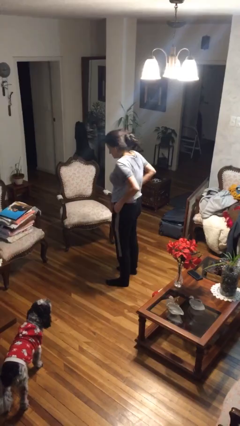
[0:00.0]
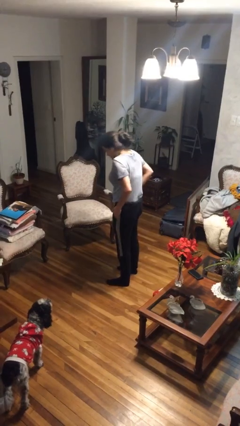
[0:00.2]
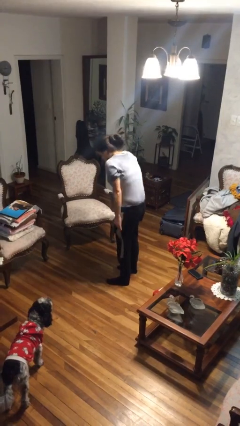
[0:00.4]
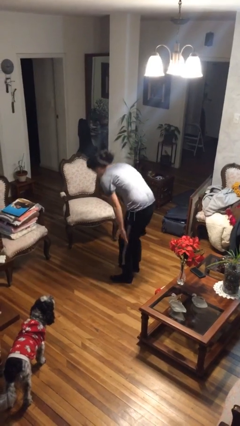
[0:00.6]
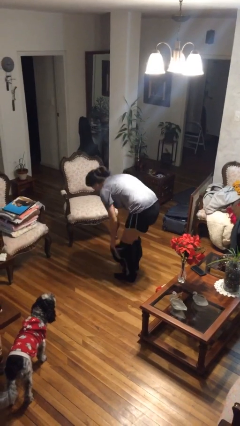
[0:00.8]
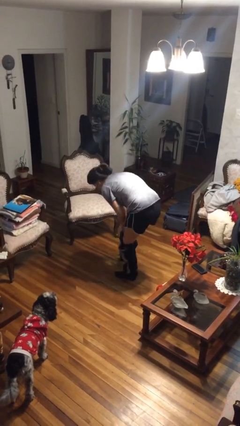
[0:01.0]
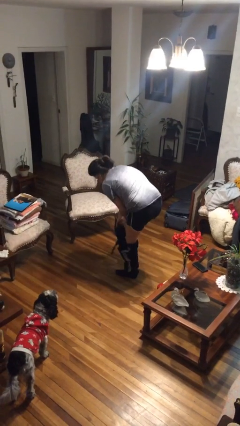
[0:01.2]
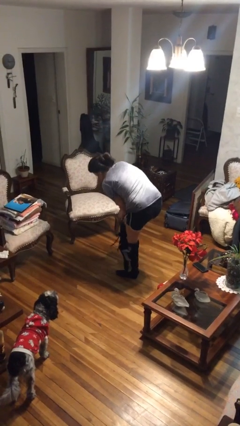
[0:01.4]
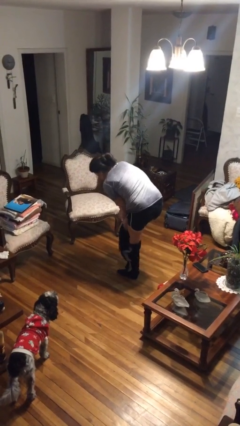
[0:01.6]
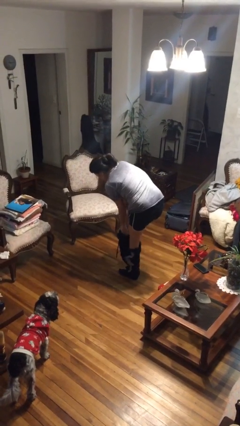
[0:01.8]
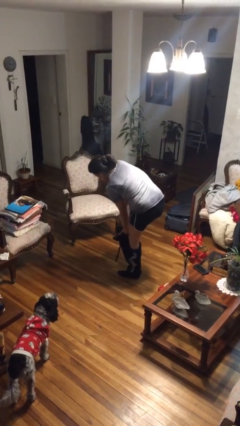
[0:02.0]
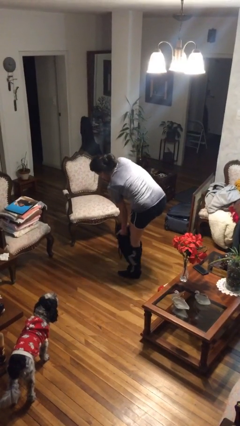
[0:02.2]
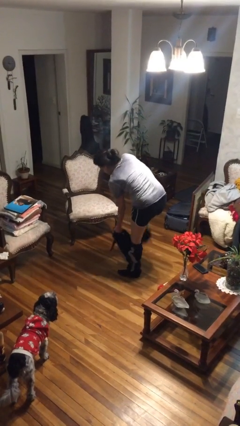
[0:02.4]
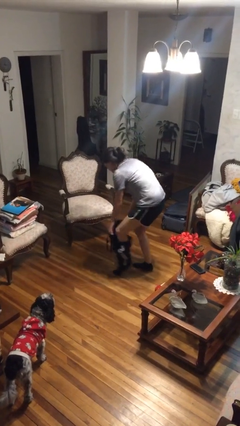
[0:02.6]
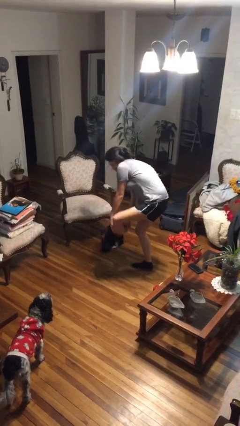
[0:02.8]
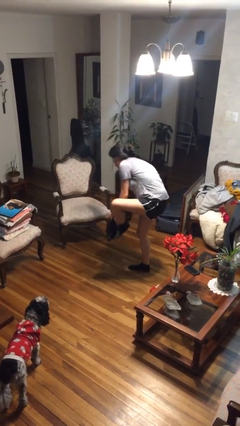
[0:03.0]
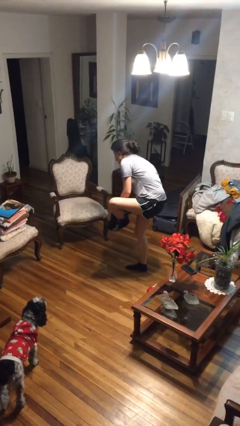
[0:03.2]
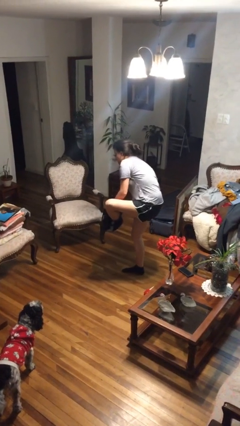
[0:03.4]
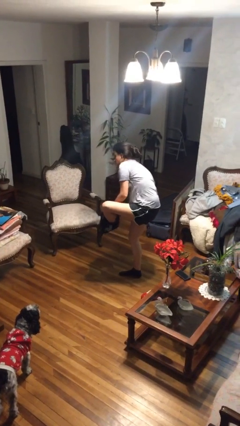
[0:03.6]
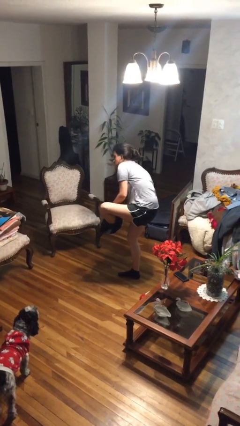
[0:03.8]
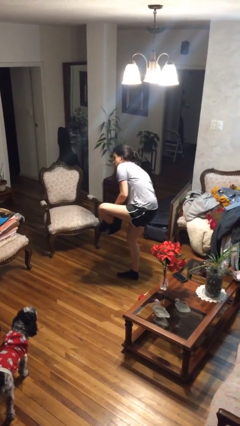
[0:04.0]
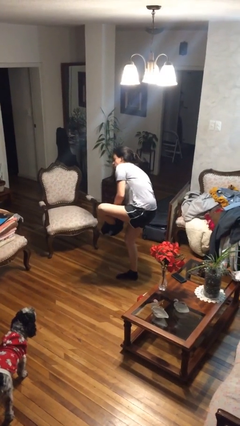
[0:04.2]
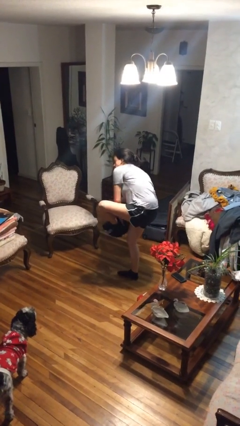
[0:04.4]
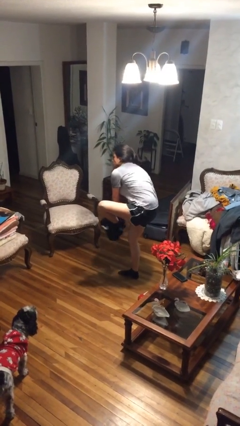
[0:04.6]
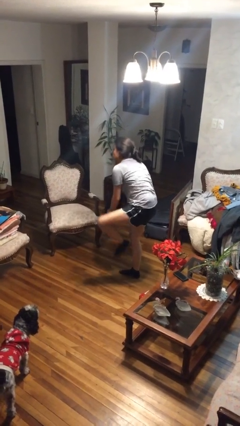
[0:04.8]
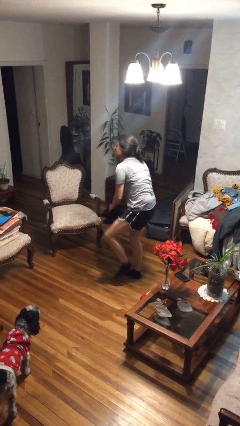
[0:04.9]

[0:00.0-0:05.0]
person takes off pants

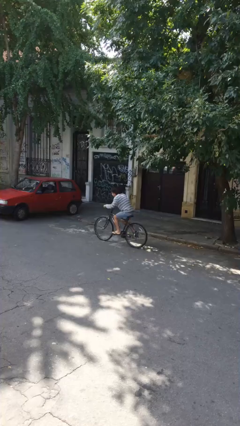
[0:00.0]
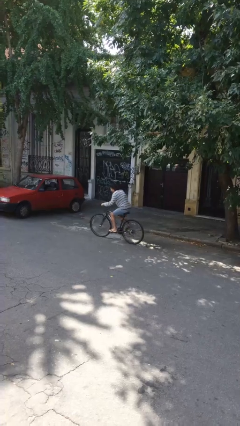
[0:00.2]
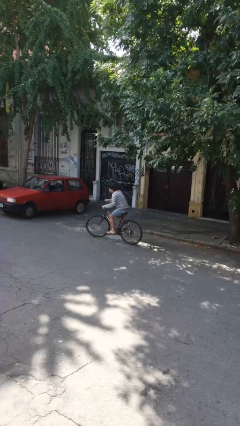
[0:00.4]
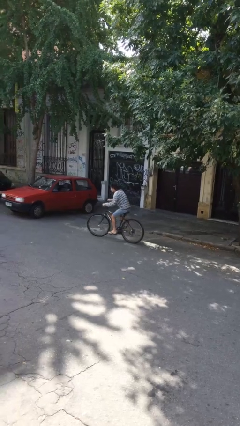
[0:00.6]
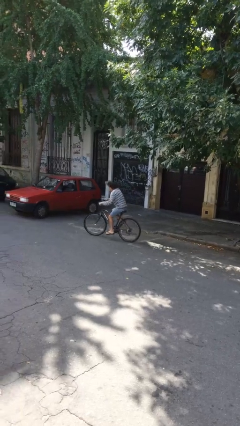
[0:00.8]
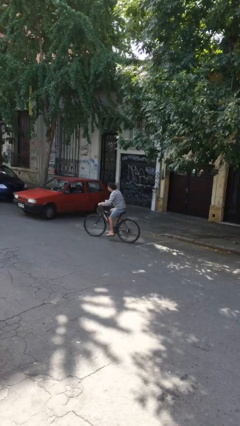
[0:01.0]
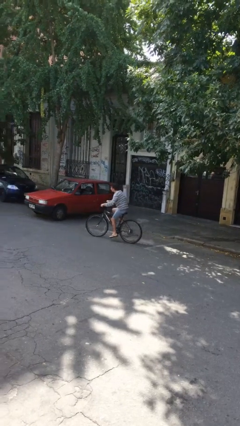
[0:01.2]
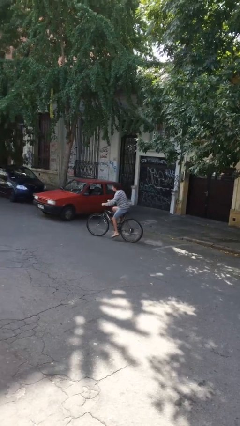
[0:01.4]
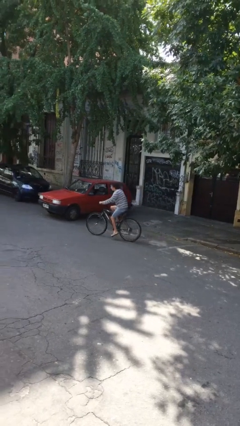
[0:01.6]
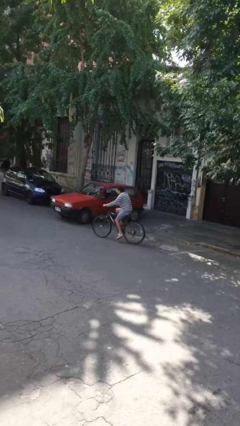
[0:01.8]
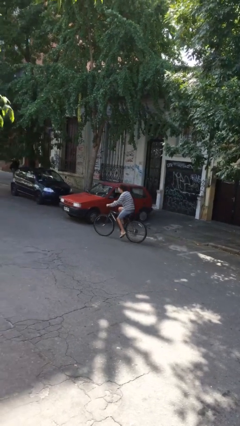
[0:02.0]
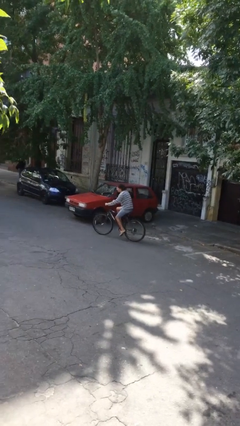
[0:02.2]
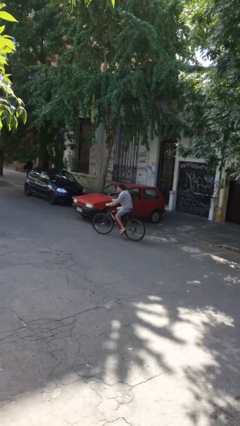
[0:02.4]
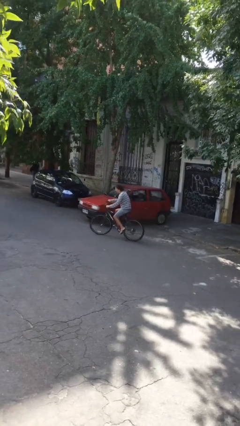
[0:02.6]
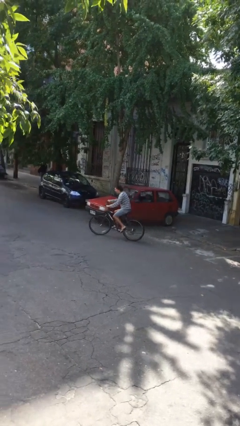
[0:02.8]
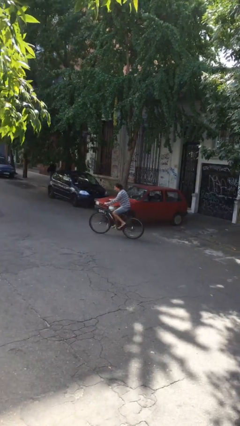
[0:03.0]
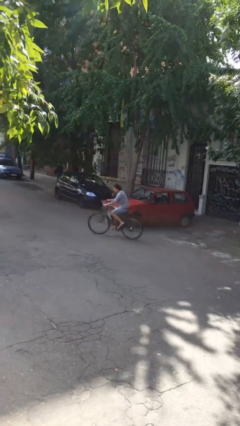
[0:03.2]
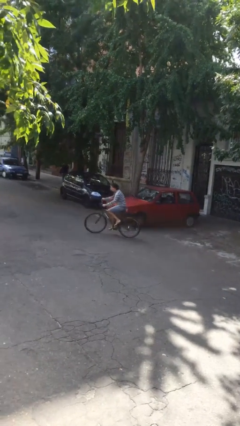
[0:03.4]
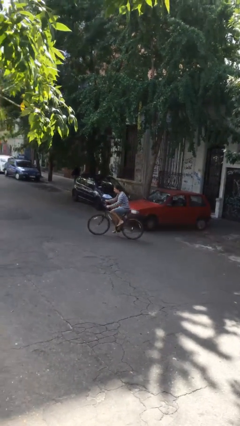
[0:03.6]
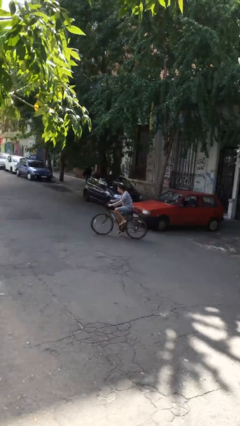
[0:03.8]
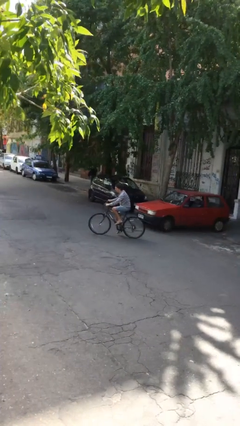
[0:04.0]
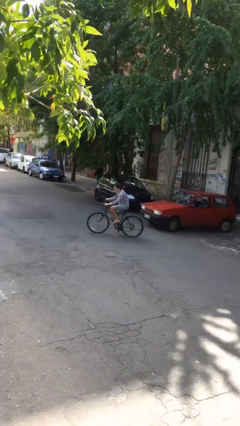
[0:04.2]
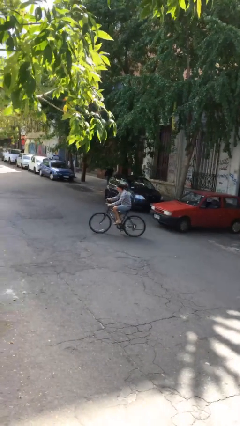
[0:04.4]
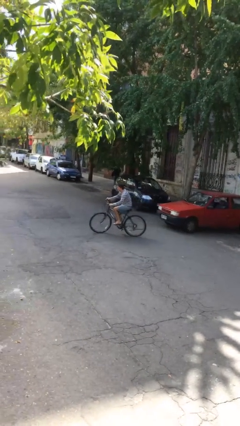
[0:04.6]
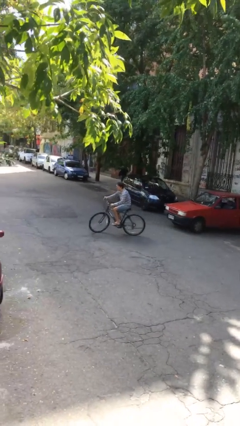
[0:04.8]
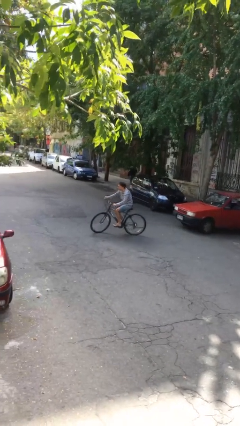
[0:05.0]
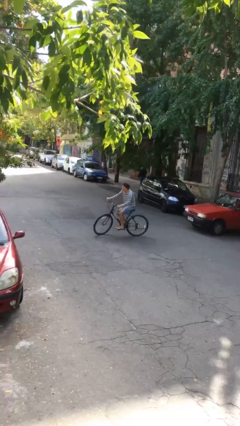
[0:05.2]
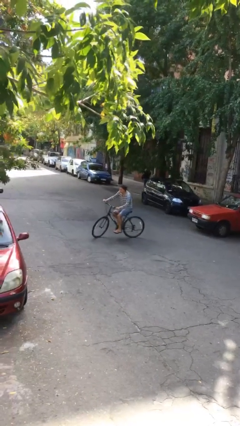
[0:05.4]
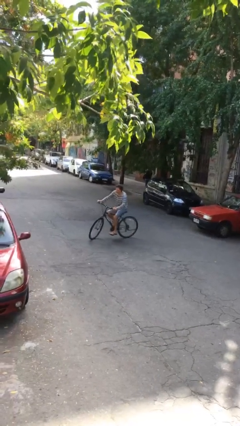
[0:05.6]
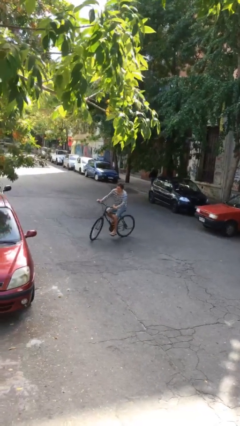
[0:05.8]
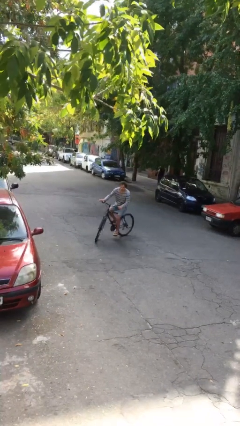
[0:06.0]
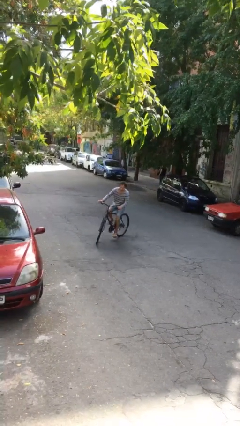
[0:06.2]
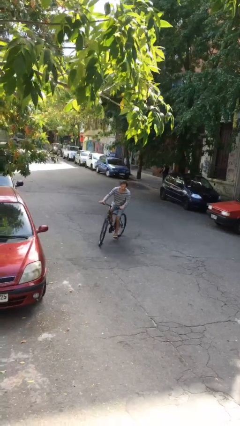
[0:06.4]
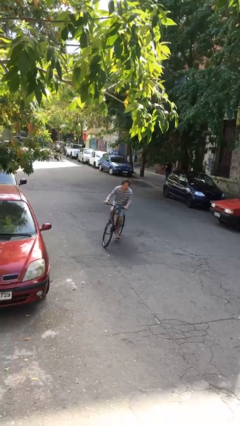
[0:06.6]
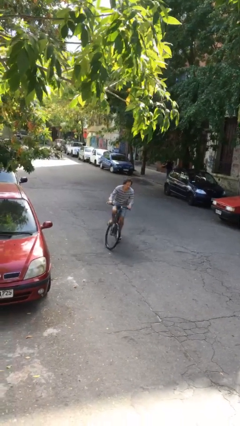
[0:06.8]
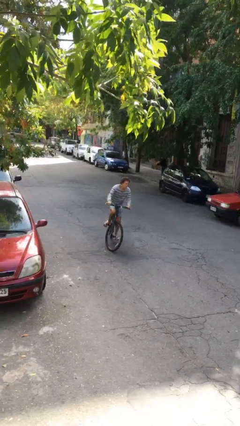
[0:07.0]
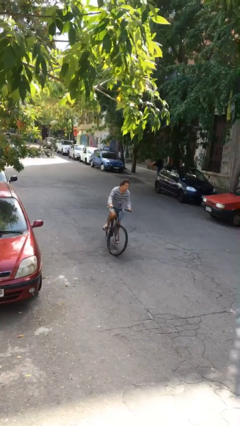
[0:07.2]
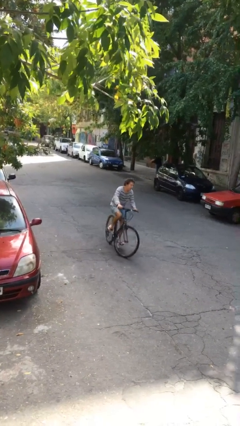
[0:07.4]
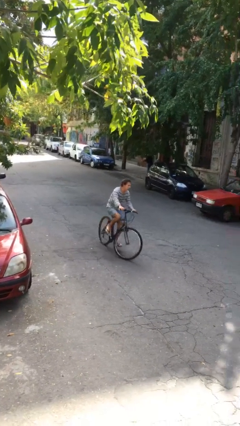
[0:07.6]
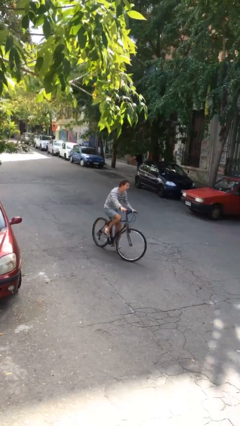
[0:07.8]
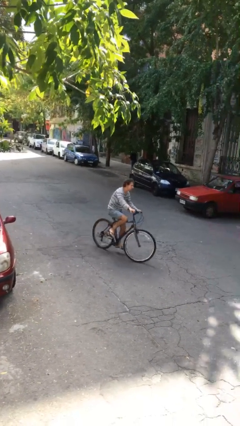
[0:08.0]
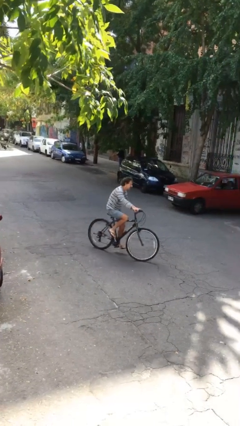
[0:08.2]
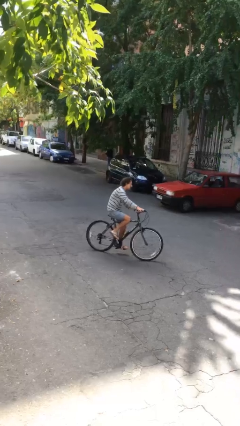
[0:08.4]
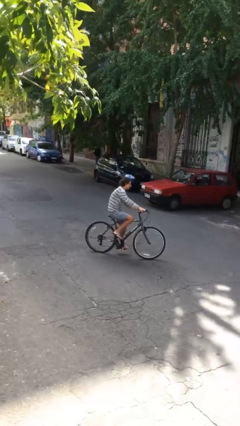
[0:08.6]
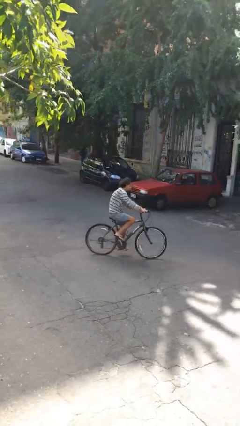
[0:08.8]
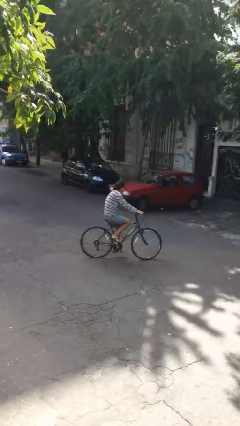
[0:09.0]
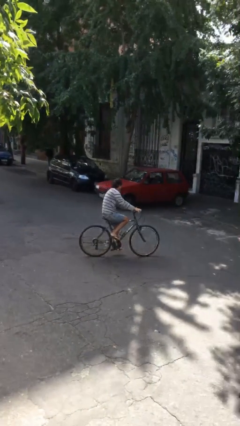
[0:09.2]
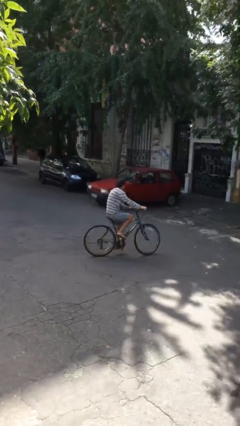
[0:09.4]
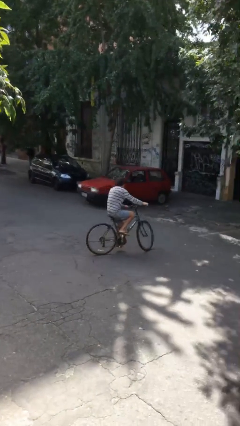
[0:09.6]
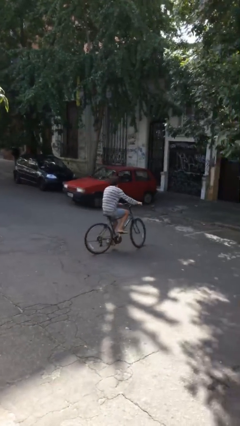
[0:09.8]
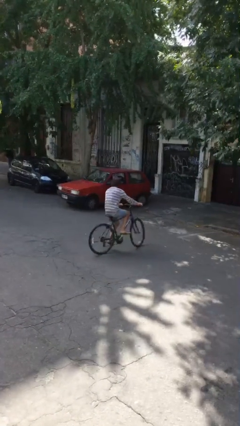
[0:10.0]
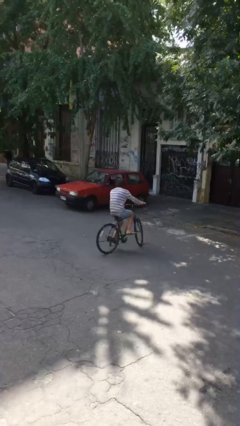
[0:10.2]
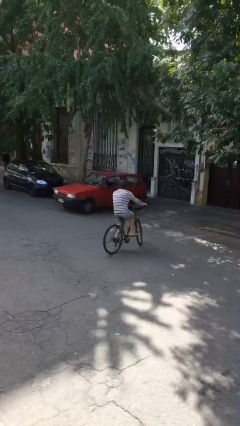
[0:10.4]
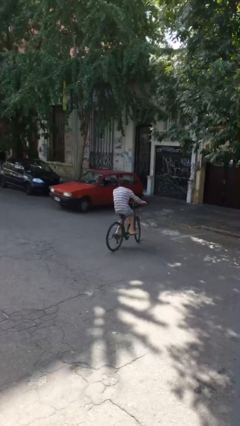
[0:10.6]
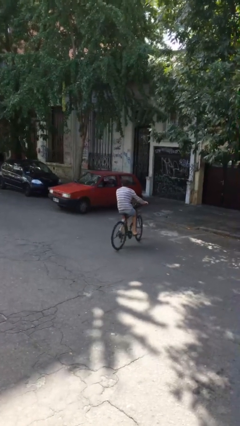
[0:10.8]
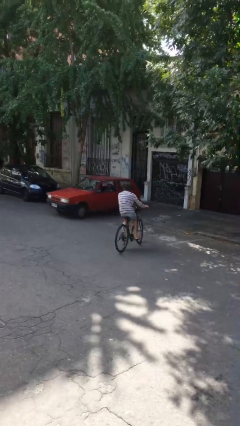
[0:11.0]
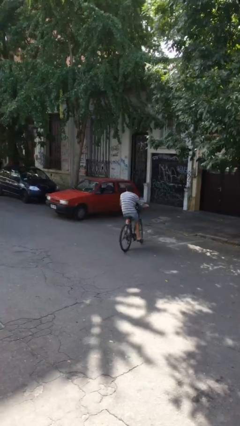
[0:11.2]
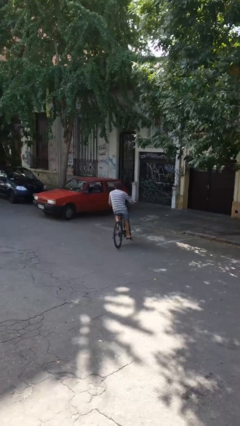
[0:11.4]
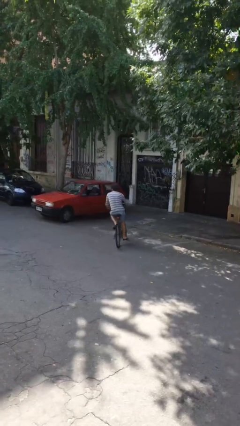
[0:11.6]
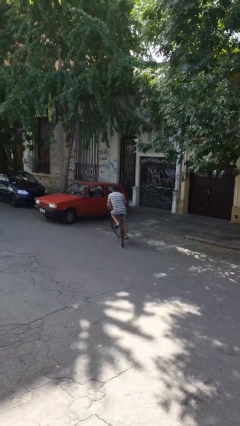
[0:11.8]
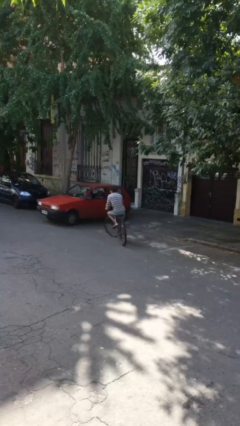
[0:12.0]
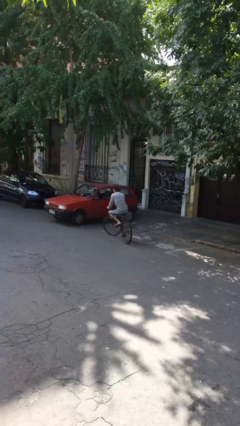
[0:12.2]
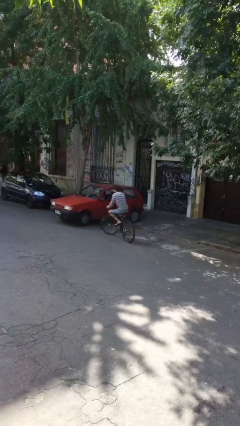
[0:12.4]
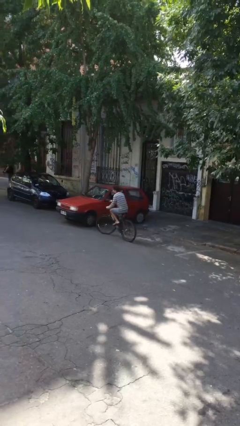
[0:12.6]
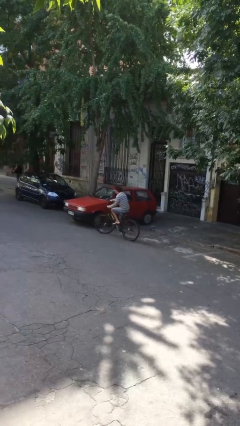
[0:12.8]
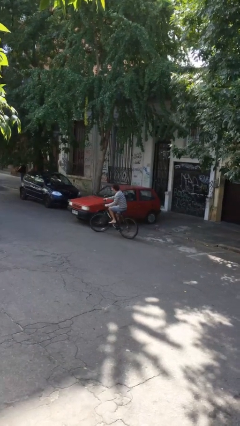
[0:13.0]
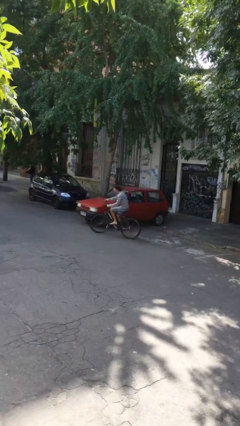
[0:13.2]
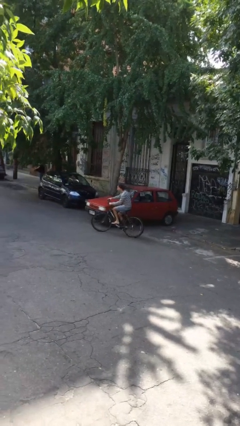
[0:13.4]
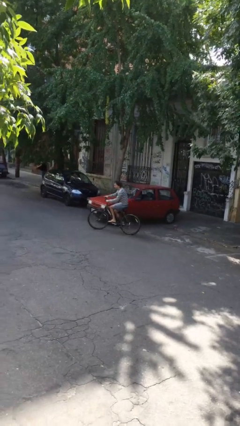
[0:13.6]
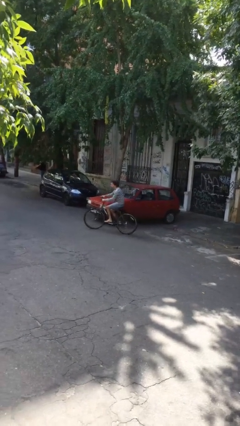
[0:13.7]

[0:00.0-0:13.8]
person rides bicycle
